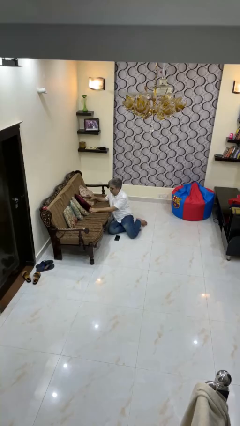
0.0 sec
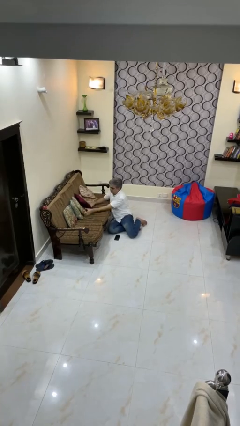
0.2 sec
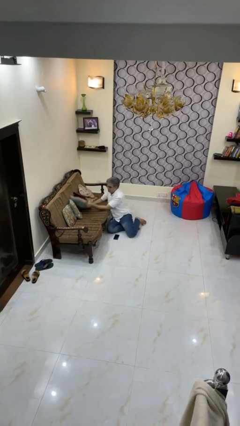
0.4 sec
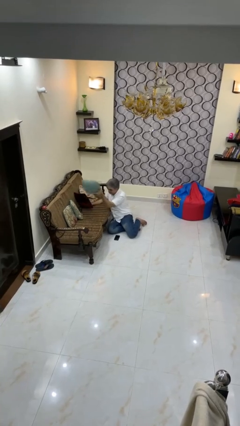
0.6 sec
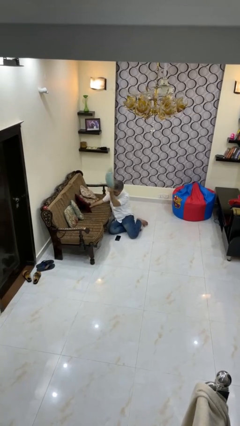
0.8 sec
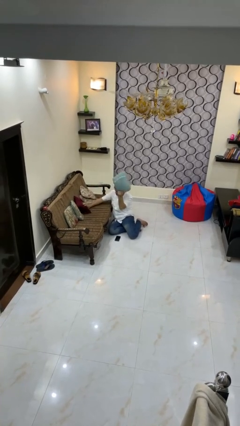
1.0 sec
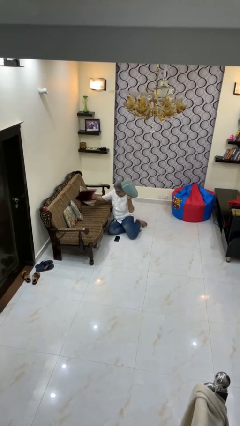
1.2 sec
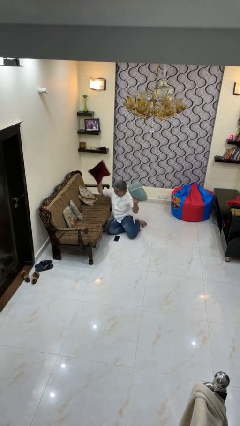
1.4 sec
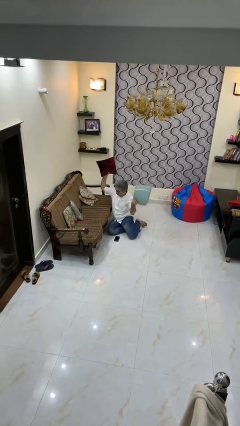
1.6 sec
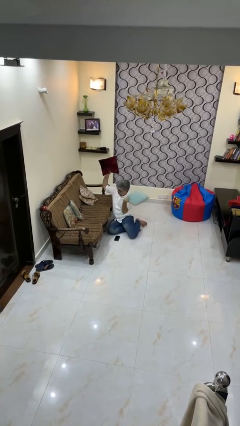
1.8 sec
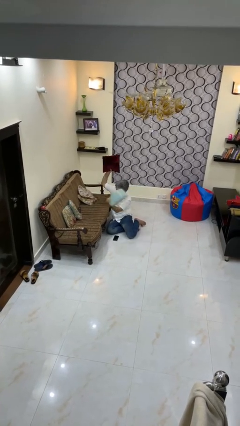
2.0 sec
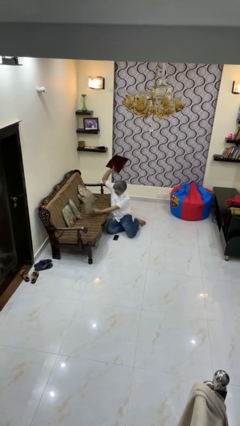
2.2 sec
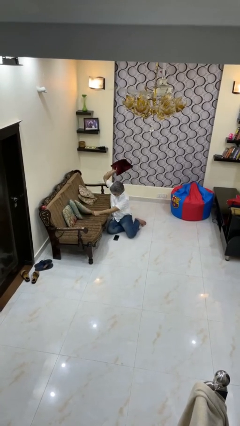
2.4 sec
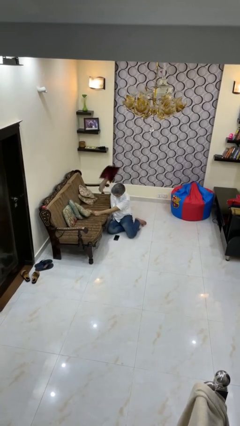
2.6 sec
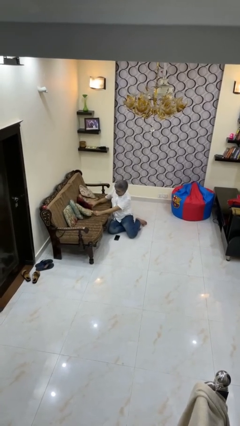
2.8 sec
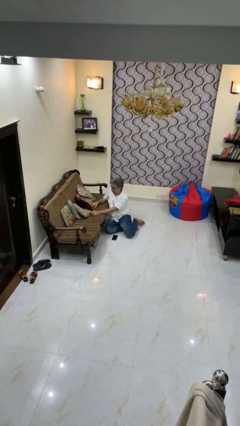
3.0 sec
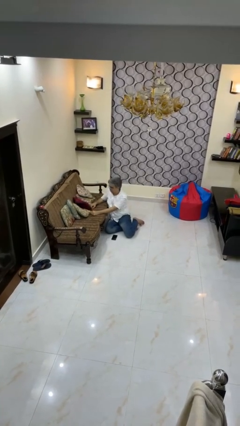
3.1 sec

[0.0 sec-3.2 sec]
person searches in couch

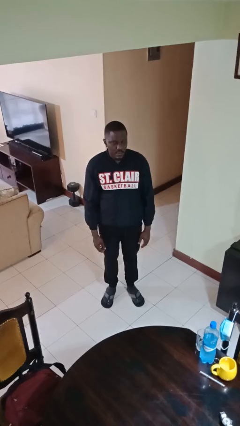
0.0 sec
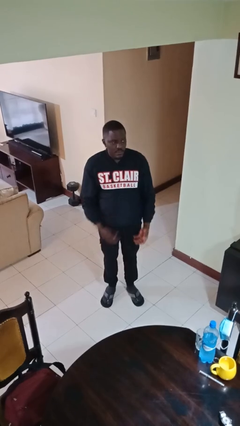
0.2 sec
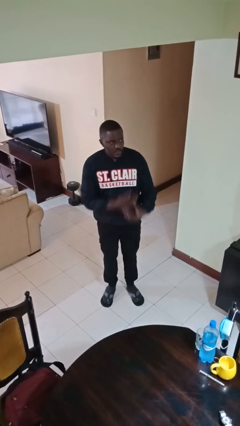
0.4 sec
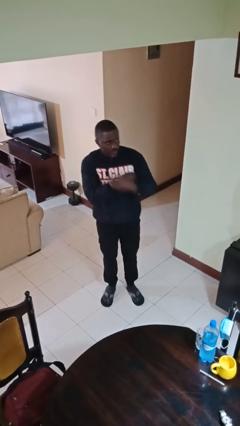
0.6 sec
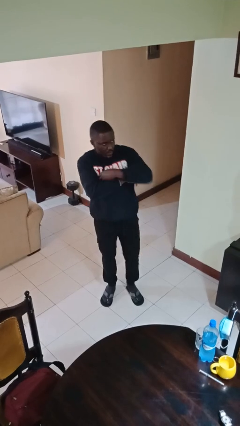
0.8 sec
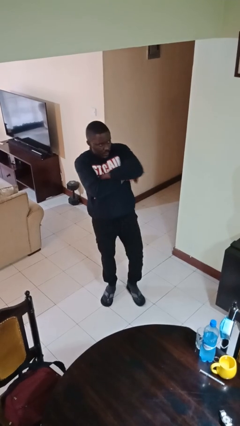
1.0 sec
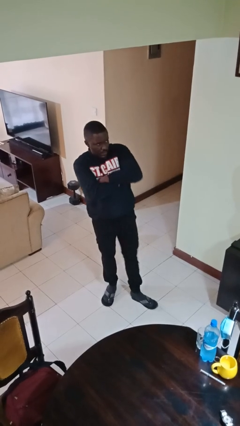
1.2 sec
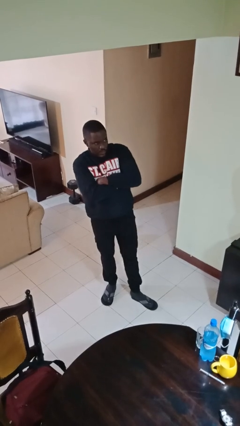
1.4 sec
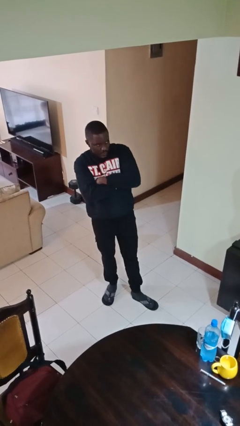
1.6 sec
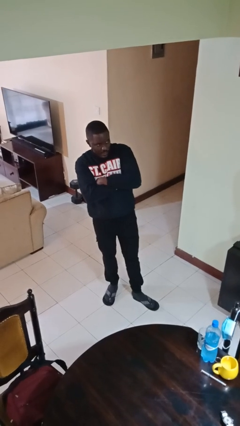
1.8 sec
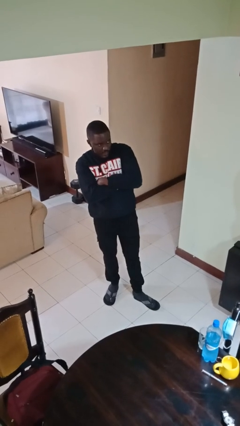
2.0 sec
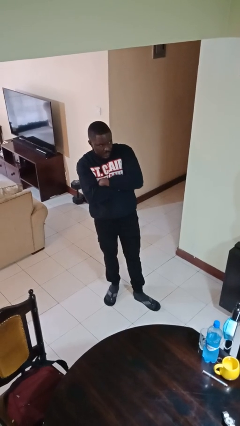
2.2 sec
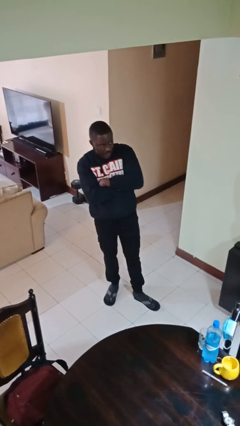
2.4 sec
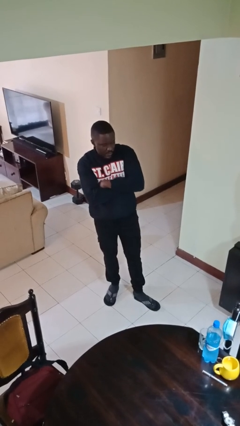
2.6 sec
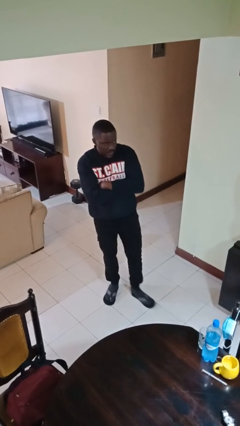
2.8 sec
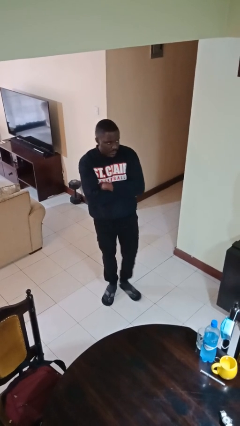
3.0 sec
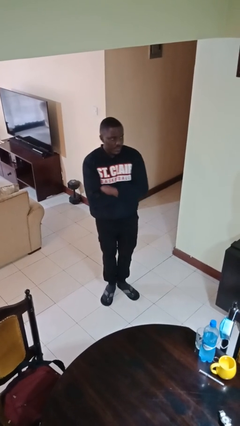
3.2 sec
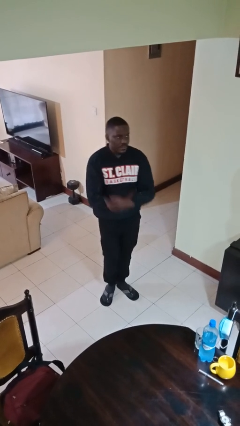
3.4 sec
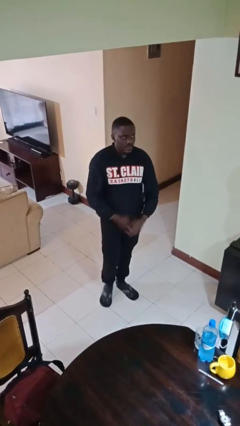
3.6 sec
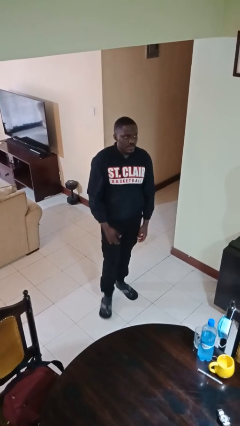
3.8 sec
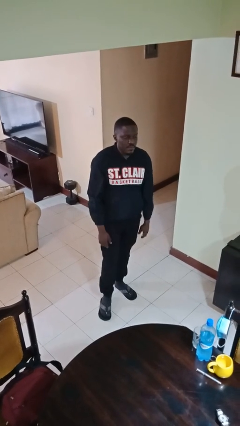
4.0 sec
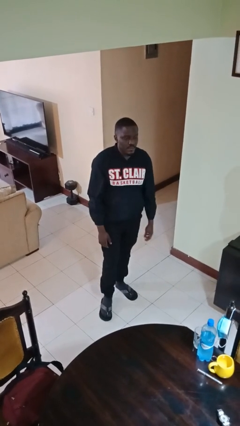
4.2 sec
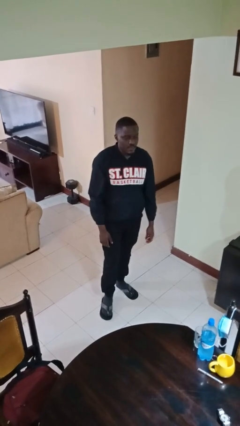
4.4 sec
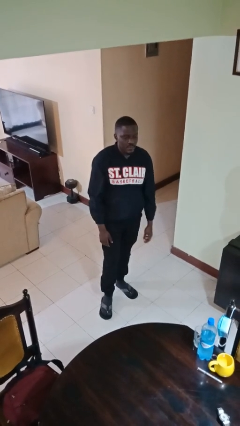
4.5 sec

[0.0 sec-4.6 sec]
person crosses arms

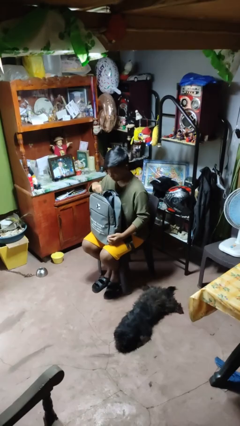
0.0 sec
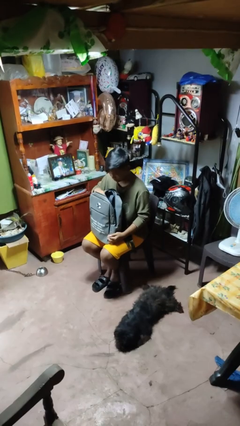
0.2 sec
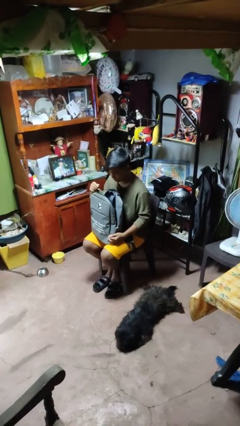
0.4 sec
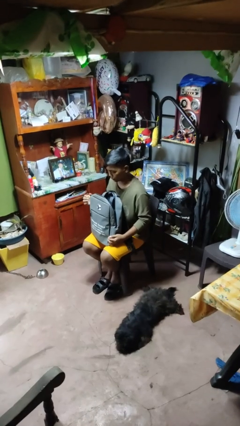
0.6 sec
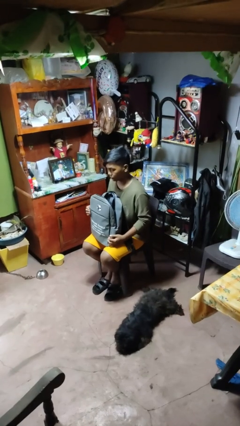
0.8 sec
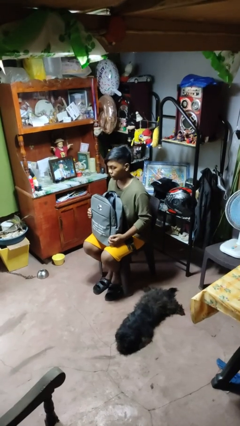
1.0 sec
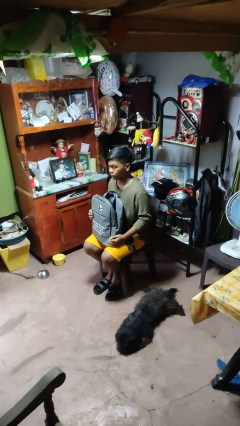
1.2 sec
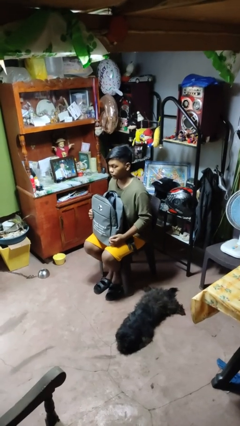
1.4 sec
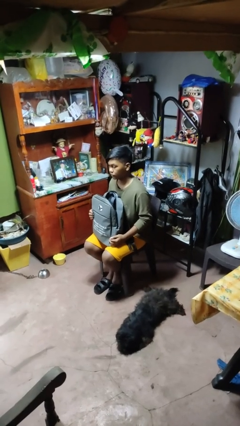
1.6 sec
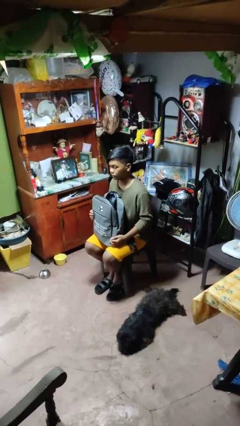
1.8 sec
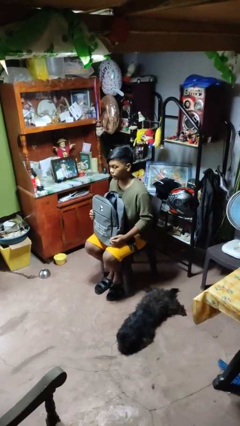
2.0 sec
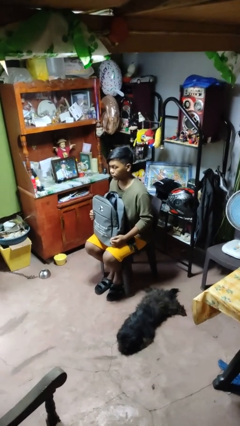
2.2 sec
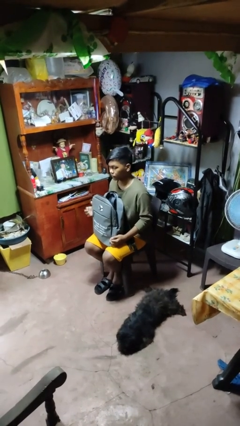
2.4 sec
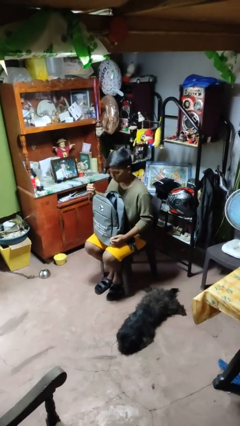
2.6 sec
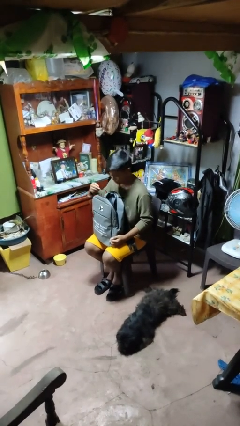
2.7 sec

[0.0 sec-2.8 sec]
person puts object into backpack

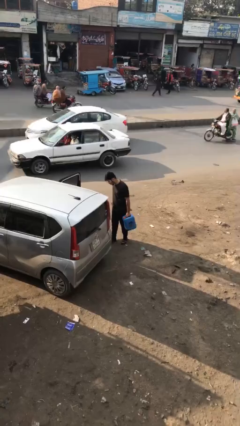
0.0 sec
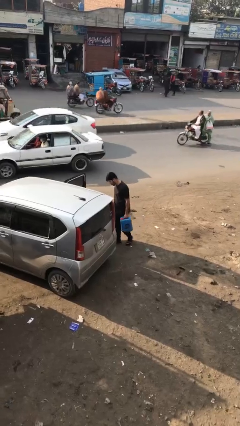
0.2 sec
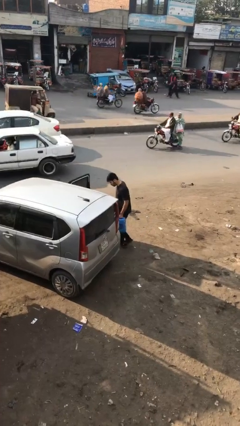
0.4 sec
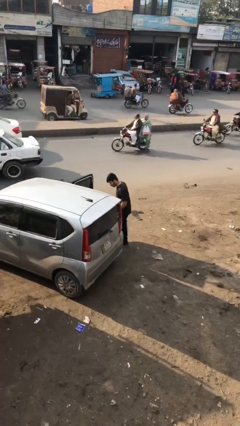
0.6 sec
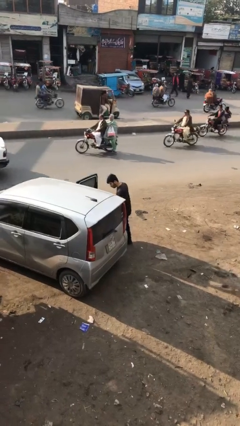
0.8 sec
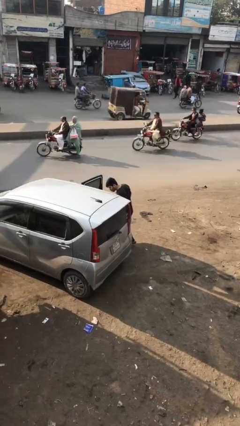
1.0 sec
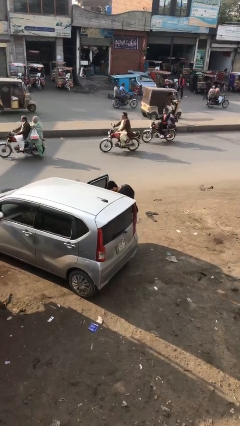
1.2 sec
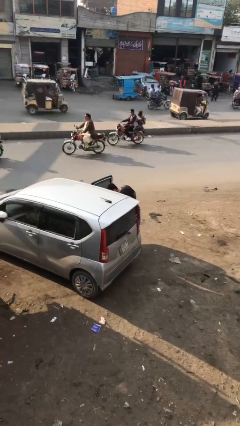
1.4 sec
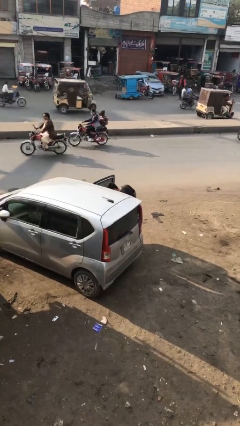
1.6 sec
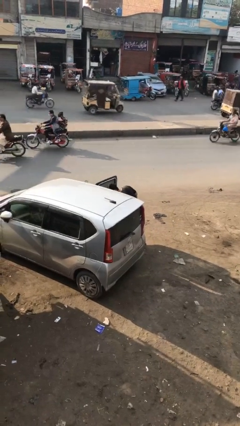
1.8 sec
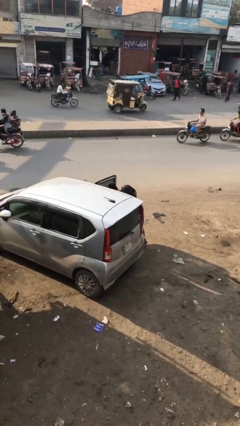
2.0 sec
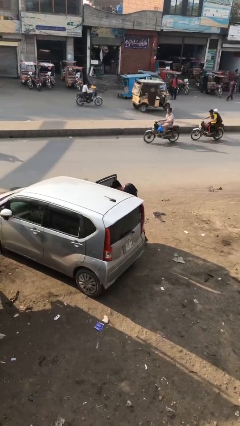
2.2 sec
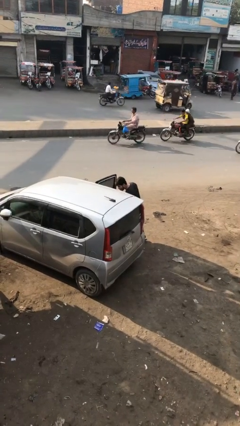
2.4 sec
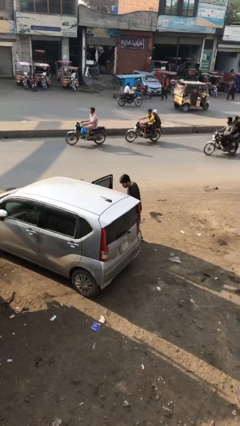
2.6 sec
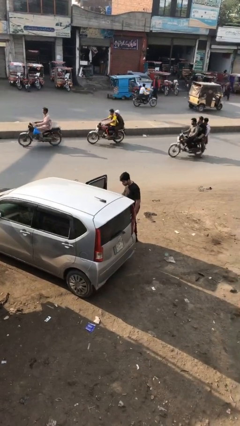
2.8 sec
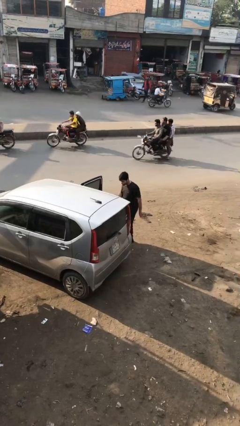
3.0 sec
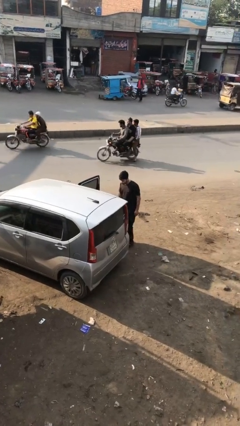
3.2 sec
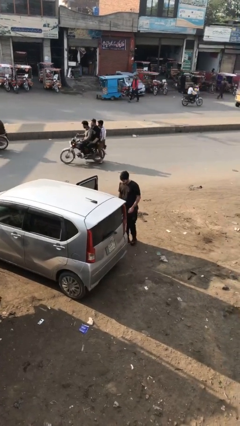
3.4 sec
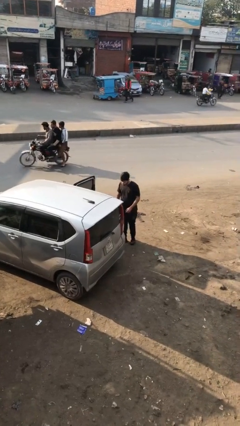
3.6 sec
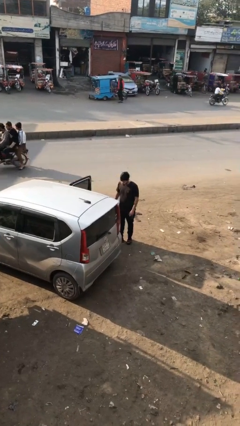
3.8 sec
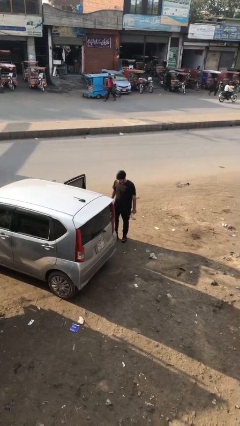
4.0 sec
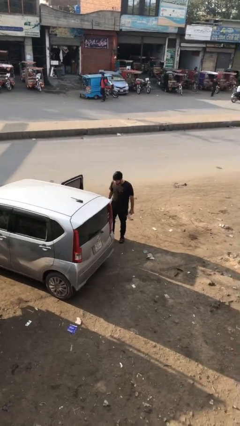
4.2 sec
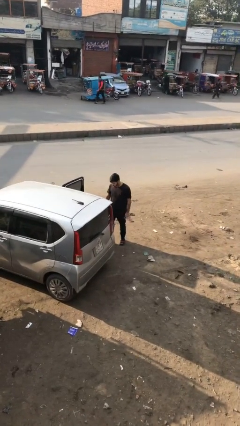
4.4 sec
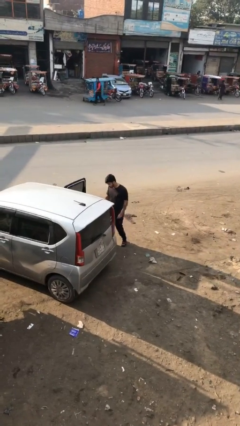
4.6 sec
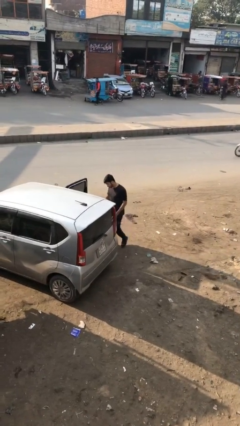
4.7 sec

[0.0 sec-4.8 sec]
person loads car

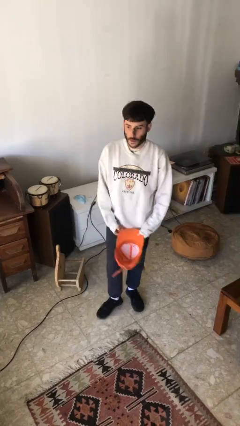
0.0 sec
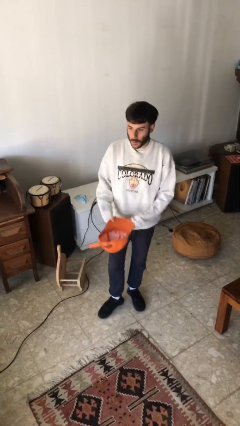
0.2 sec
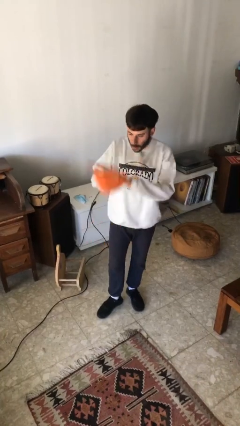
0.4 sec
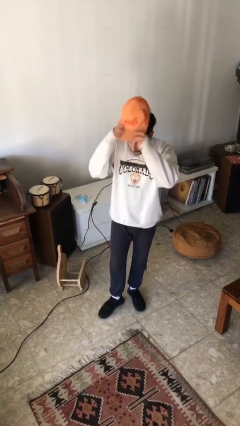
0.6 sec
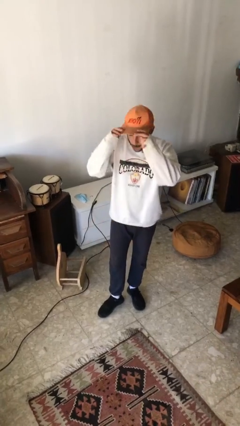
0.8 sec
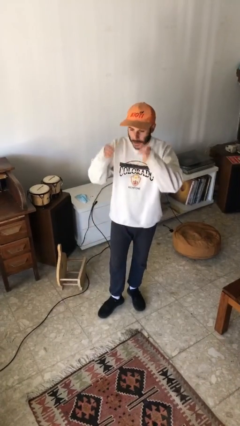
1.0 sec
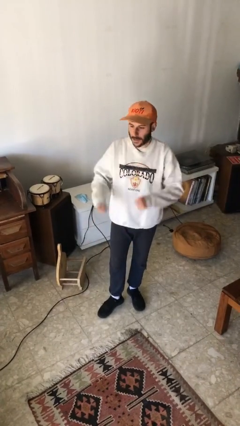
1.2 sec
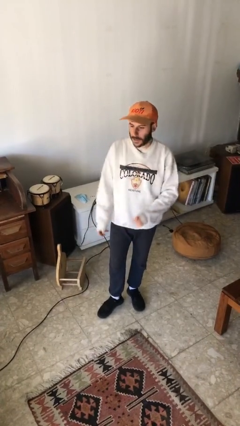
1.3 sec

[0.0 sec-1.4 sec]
person puts on hat

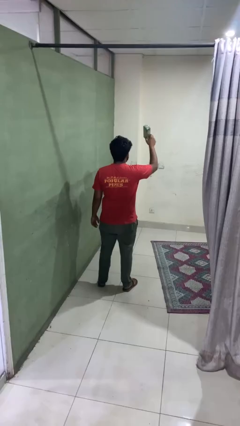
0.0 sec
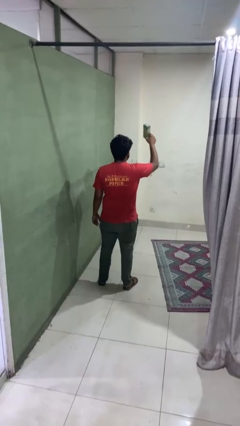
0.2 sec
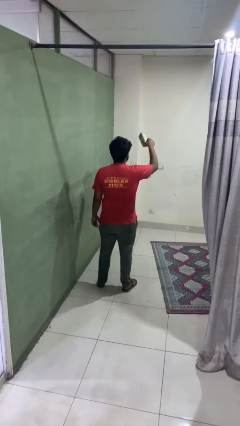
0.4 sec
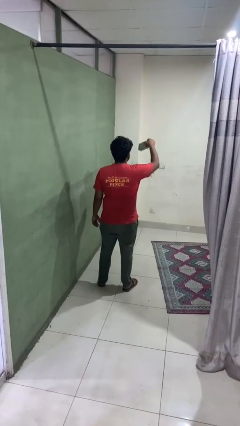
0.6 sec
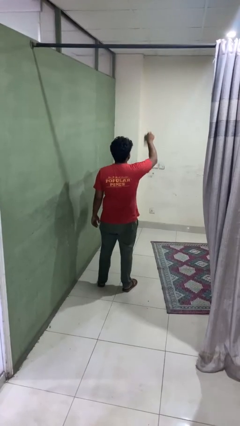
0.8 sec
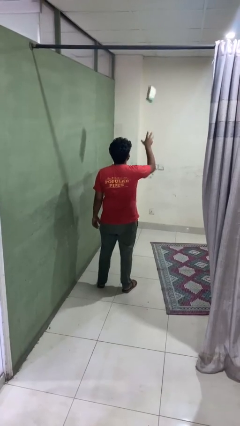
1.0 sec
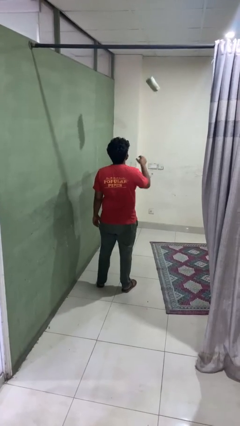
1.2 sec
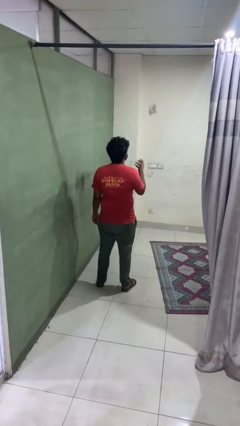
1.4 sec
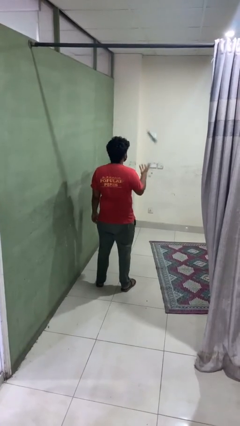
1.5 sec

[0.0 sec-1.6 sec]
person drops object
